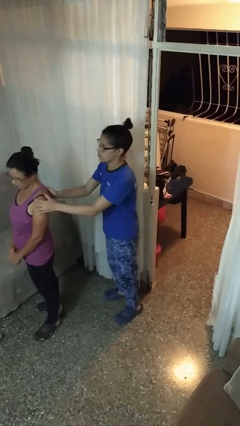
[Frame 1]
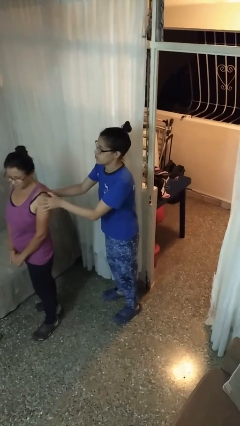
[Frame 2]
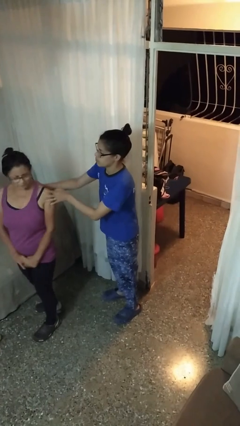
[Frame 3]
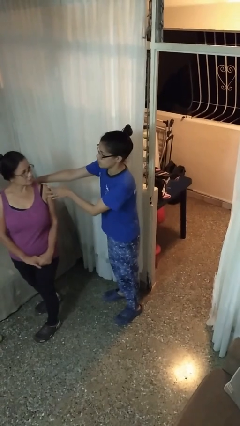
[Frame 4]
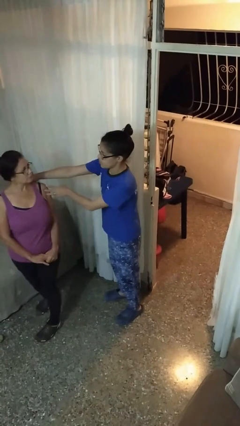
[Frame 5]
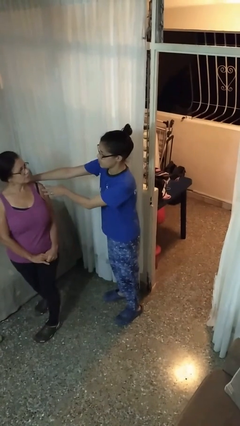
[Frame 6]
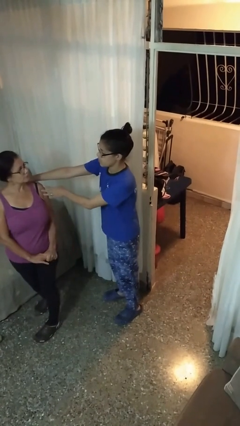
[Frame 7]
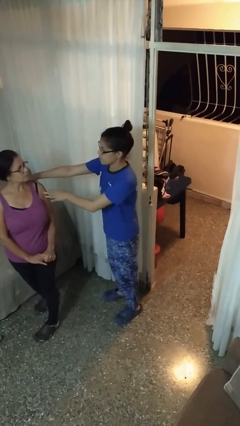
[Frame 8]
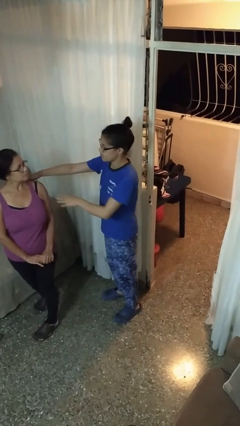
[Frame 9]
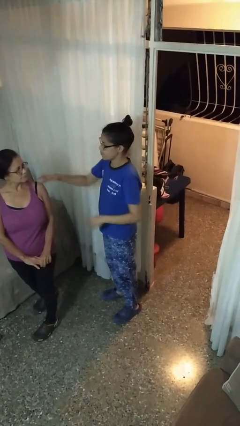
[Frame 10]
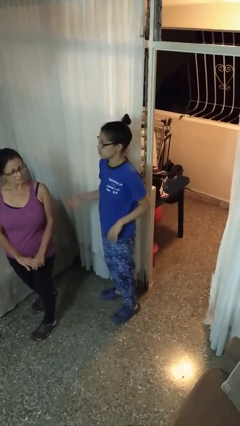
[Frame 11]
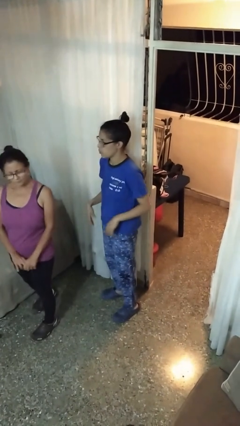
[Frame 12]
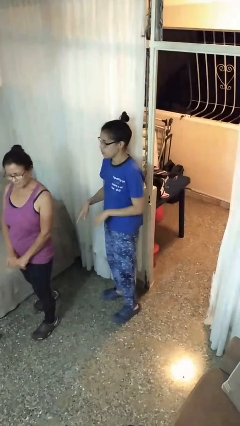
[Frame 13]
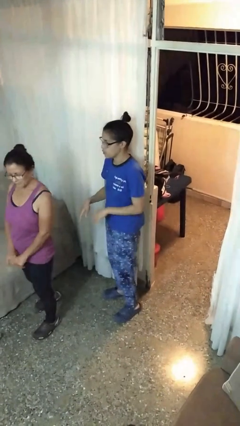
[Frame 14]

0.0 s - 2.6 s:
person spins person around

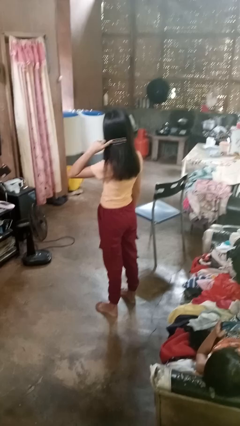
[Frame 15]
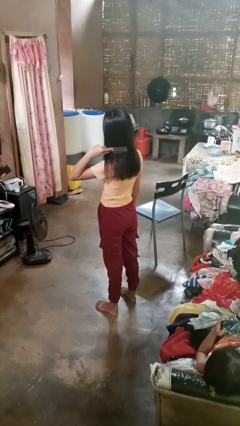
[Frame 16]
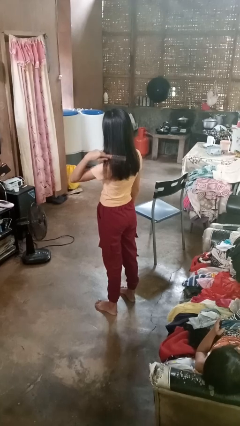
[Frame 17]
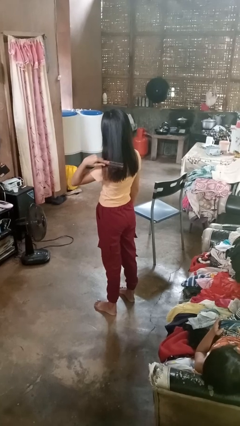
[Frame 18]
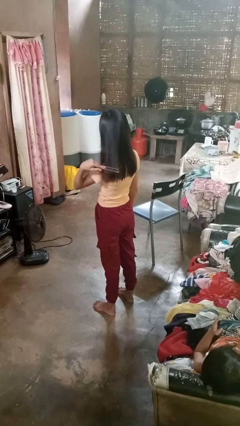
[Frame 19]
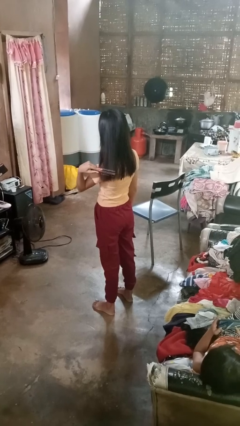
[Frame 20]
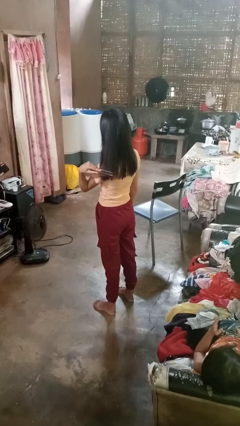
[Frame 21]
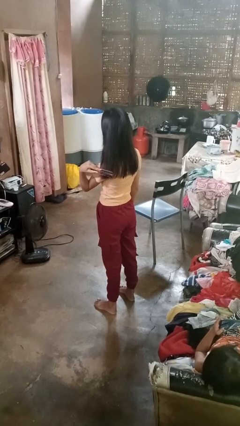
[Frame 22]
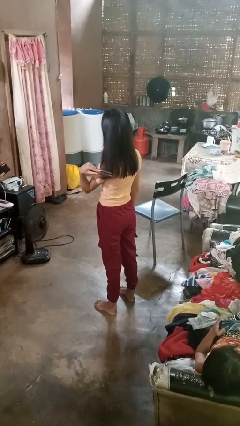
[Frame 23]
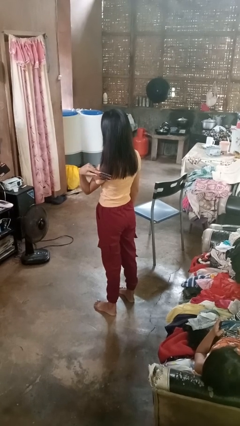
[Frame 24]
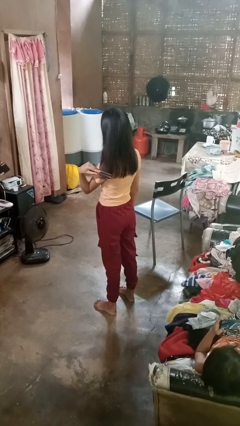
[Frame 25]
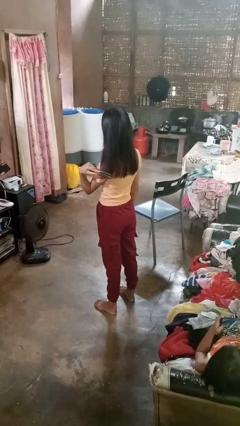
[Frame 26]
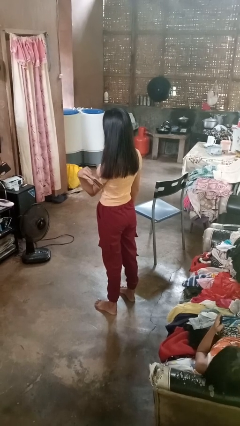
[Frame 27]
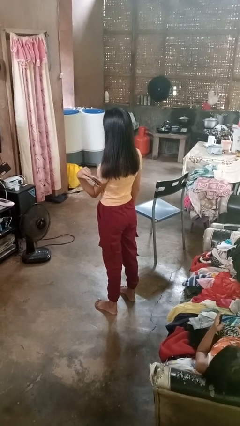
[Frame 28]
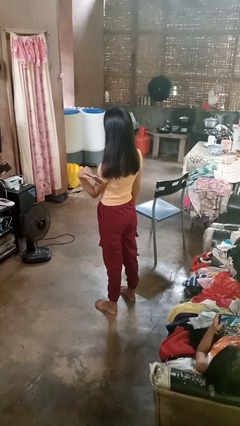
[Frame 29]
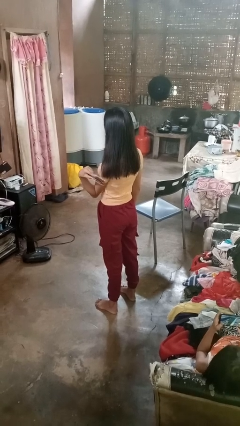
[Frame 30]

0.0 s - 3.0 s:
person brushes hair

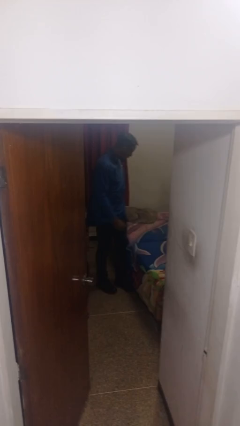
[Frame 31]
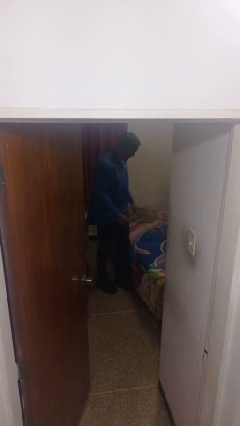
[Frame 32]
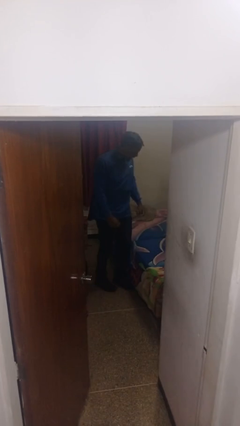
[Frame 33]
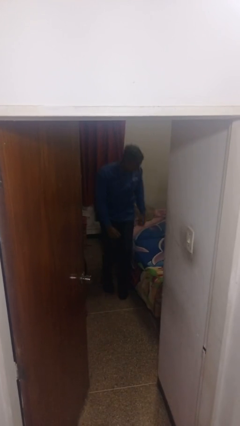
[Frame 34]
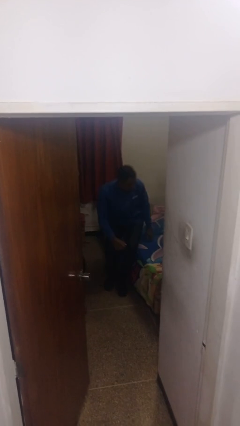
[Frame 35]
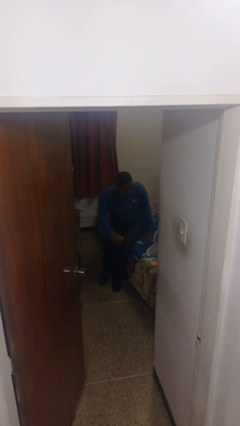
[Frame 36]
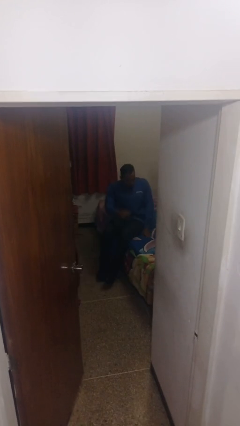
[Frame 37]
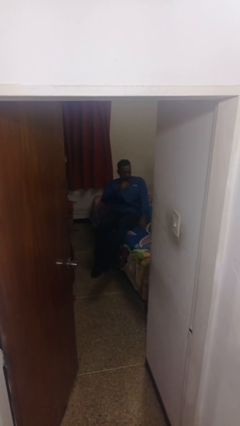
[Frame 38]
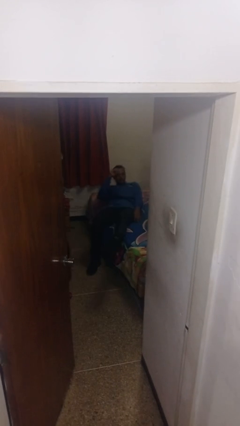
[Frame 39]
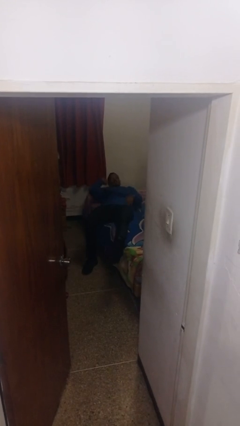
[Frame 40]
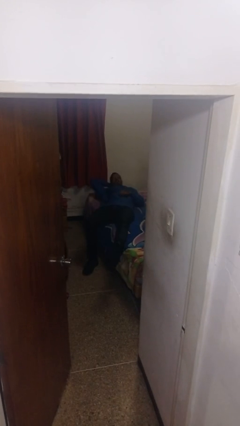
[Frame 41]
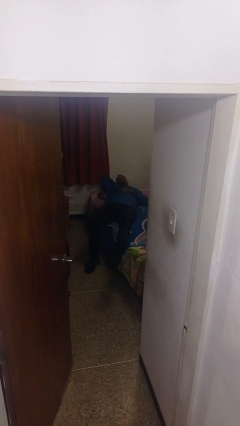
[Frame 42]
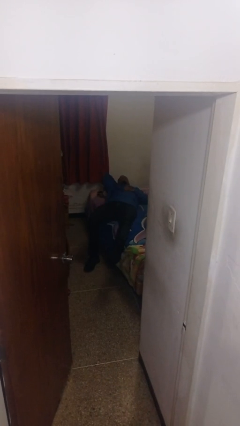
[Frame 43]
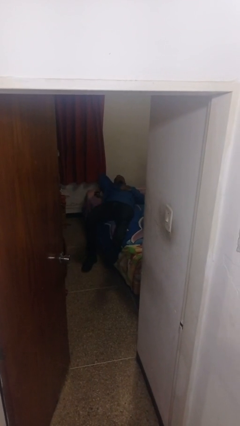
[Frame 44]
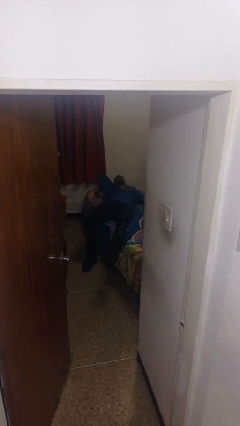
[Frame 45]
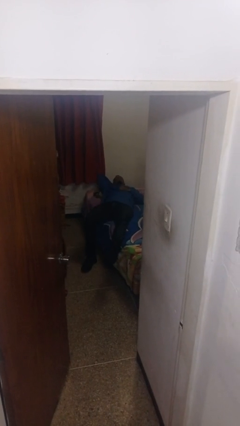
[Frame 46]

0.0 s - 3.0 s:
person lies down on bed

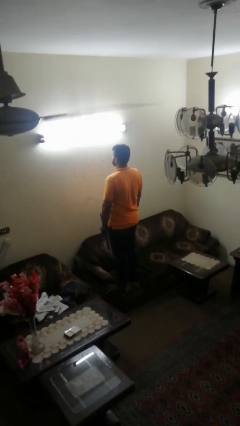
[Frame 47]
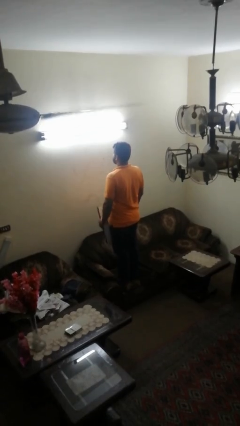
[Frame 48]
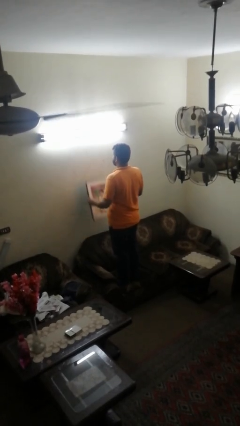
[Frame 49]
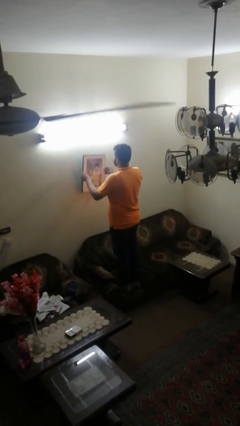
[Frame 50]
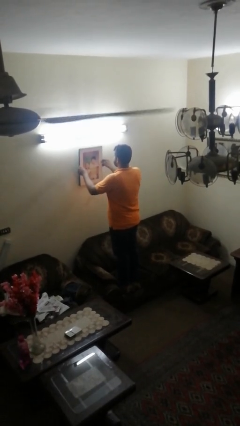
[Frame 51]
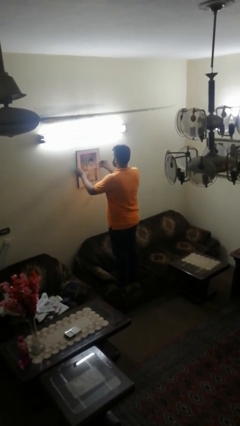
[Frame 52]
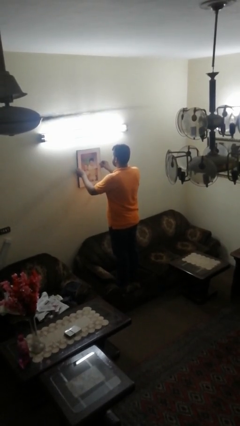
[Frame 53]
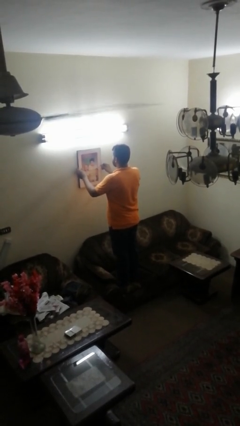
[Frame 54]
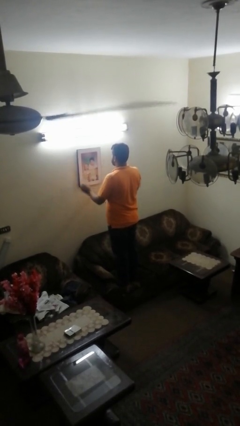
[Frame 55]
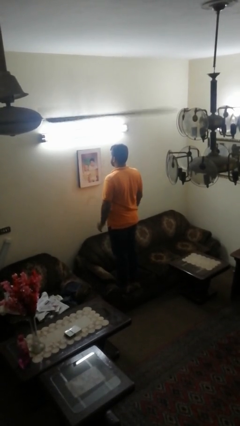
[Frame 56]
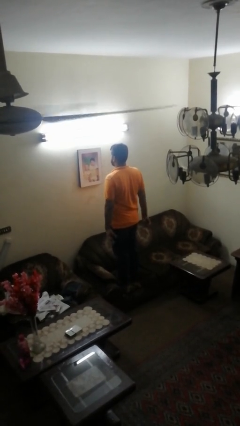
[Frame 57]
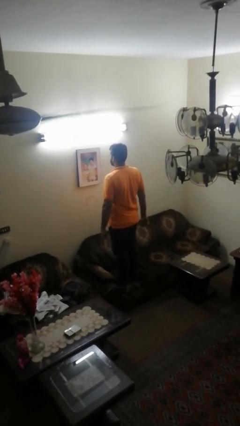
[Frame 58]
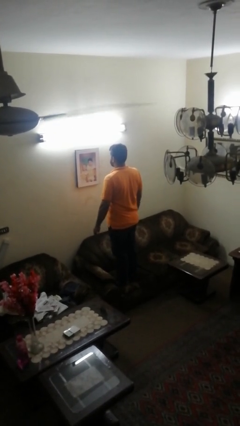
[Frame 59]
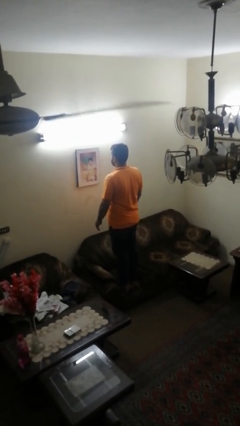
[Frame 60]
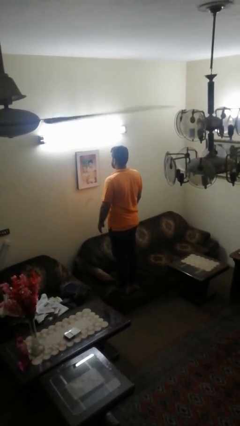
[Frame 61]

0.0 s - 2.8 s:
person puts up picture frame

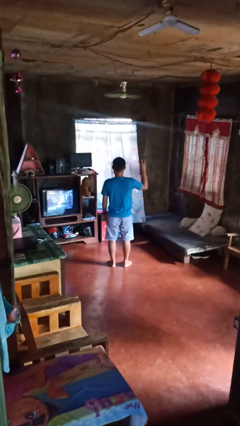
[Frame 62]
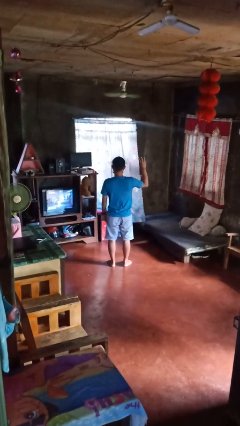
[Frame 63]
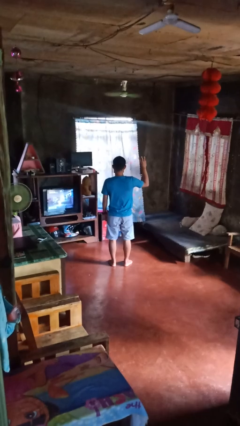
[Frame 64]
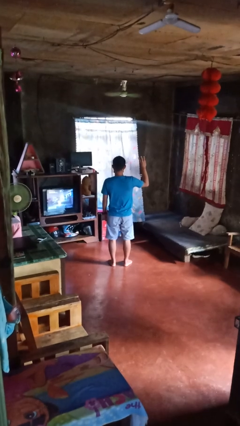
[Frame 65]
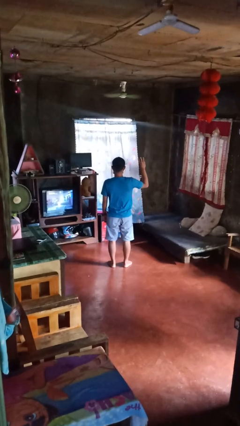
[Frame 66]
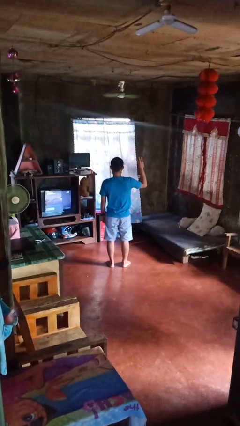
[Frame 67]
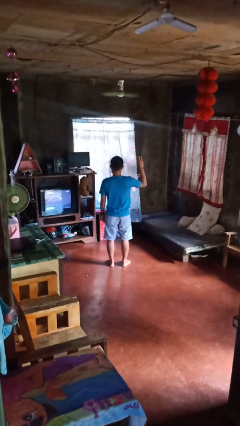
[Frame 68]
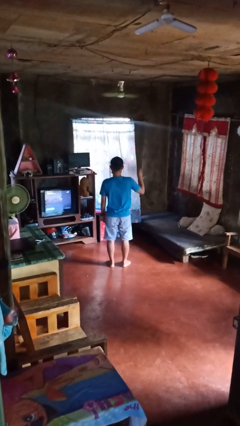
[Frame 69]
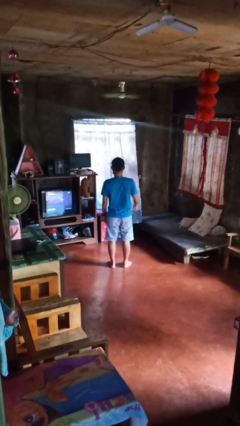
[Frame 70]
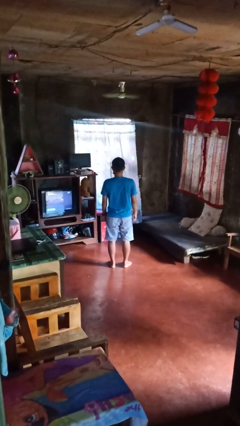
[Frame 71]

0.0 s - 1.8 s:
person gestures number three

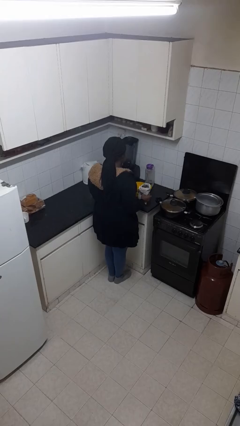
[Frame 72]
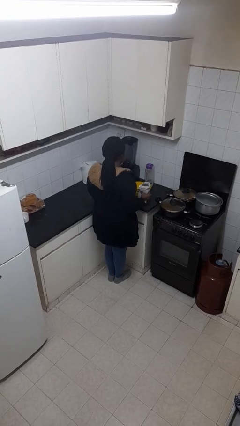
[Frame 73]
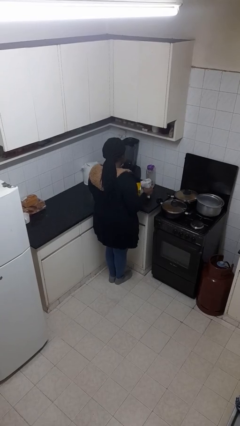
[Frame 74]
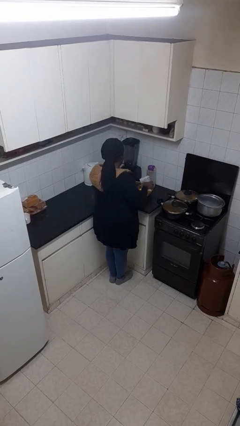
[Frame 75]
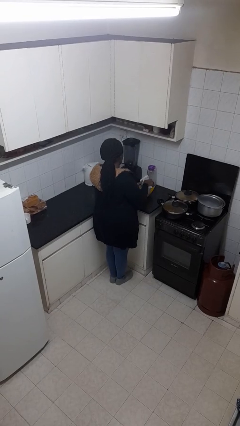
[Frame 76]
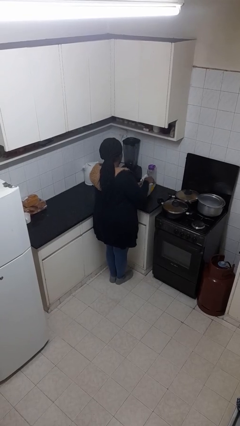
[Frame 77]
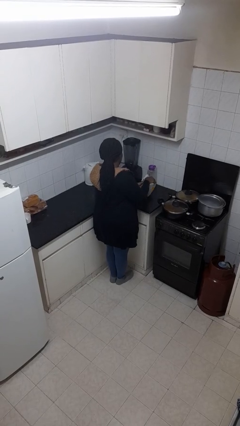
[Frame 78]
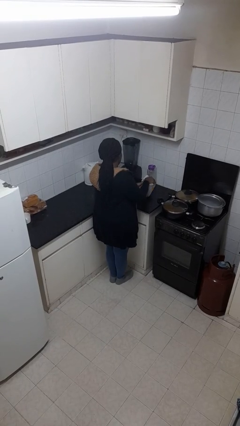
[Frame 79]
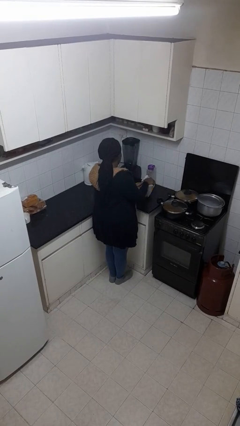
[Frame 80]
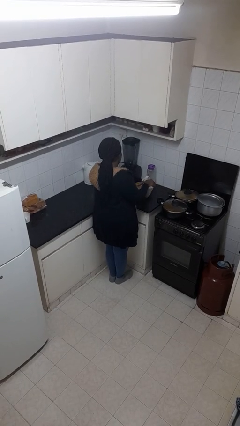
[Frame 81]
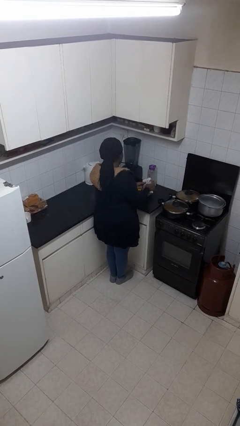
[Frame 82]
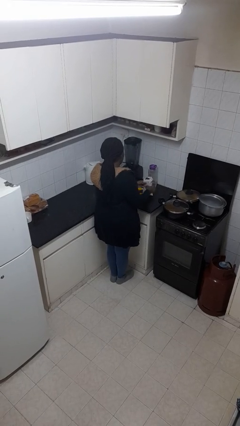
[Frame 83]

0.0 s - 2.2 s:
person pours into bowl

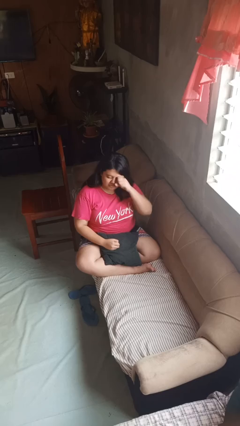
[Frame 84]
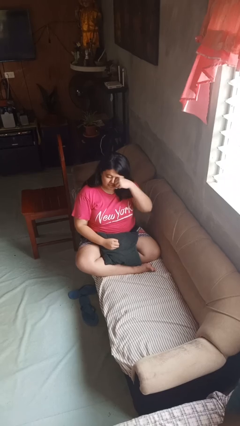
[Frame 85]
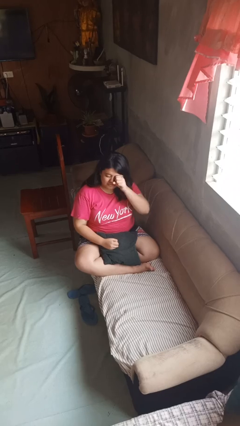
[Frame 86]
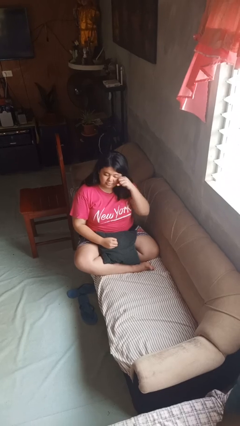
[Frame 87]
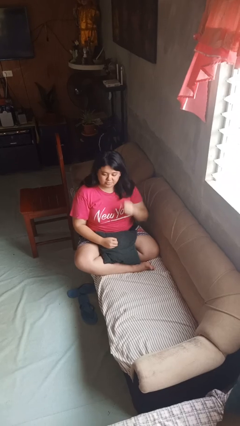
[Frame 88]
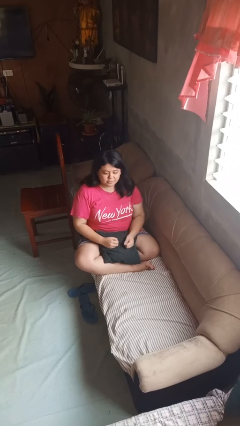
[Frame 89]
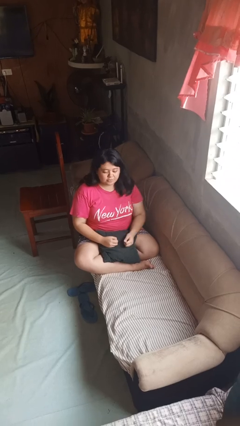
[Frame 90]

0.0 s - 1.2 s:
person rubs eyes

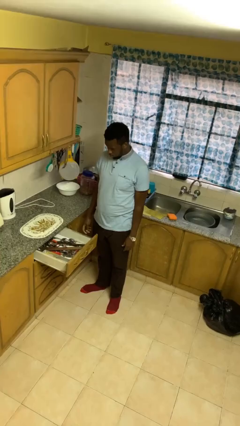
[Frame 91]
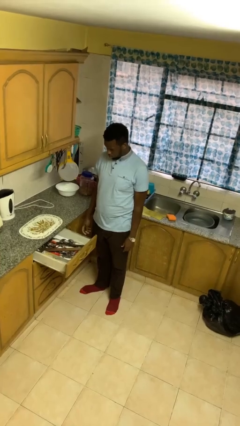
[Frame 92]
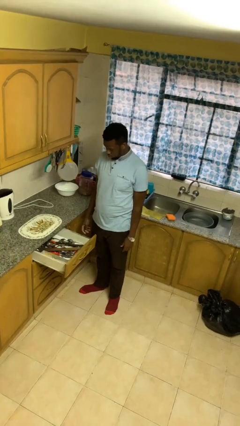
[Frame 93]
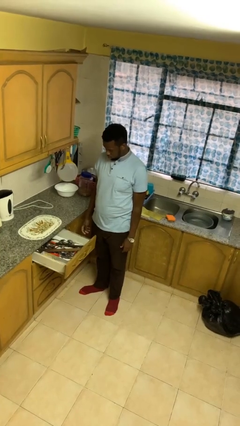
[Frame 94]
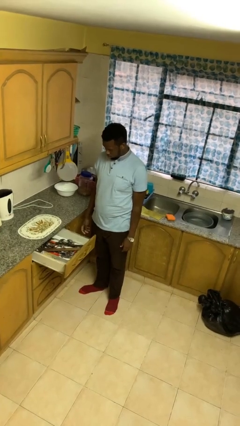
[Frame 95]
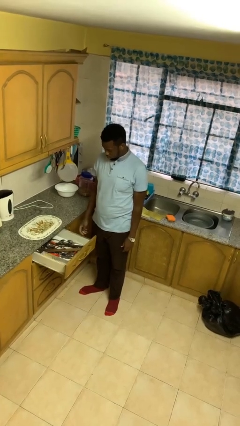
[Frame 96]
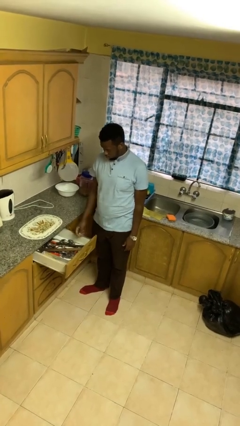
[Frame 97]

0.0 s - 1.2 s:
person takes object from kitchen drawer
